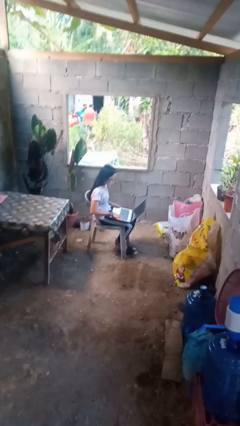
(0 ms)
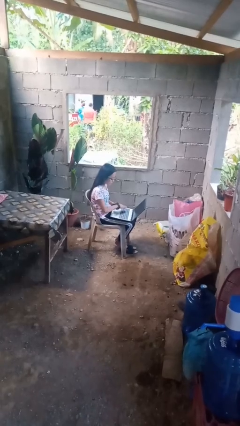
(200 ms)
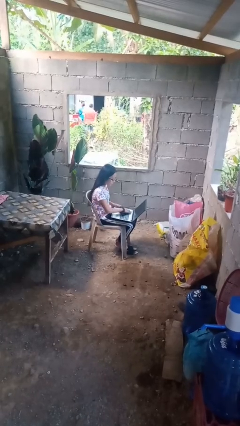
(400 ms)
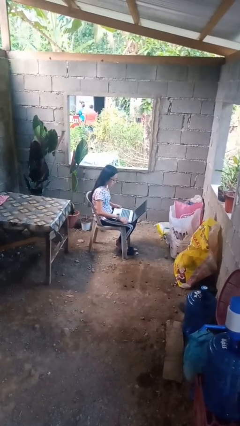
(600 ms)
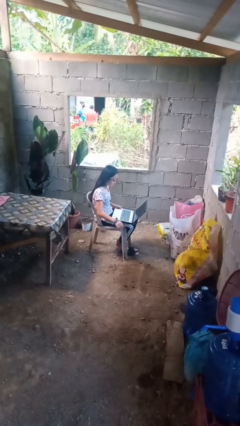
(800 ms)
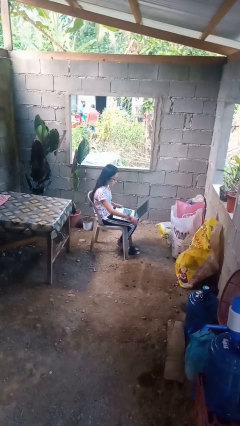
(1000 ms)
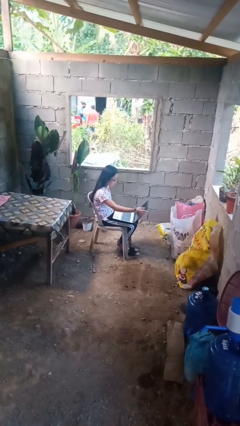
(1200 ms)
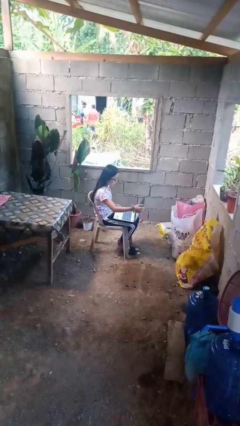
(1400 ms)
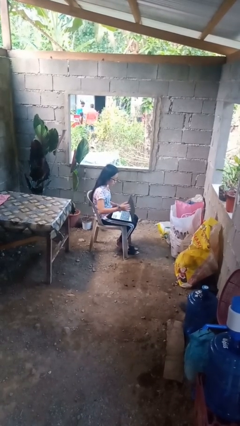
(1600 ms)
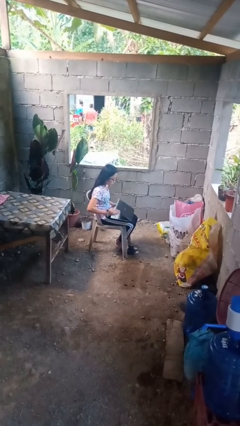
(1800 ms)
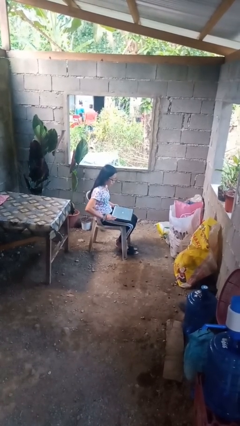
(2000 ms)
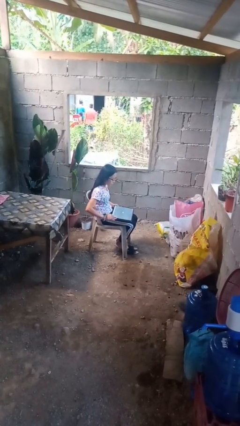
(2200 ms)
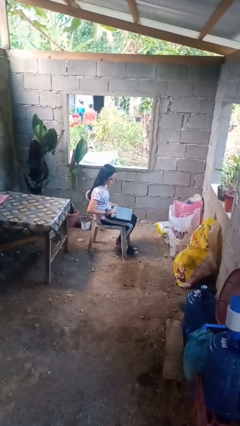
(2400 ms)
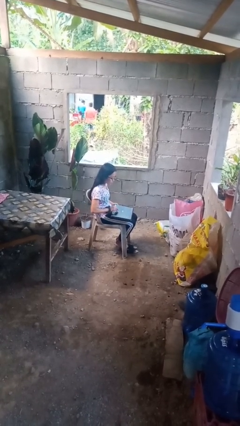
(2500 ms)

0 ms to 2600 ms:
person closes laptop

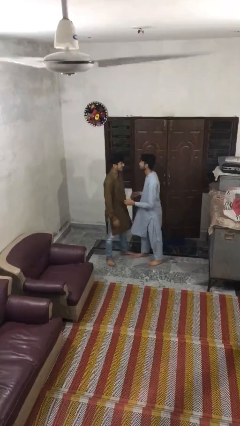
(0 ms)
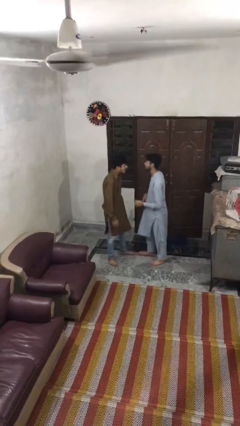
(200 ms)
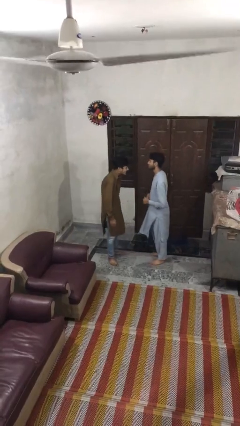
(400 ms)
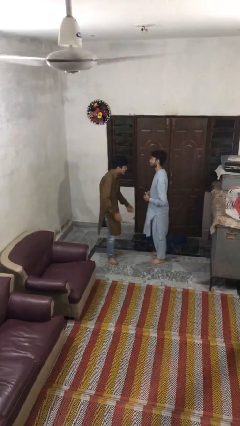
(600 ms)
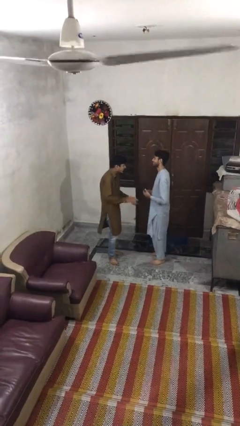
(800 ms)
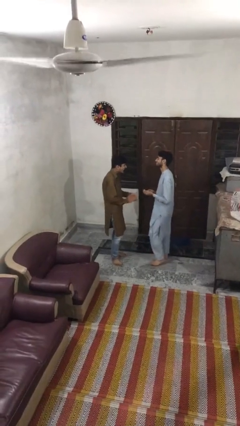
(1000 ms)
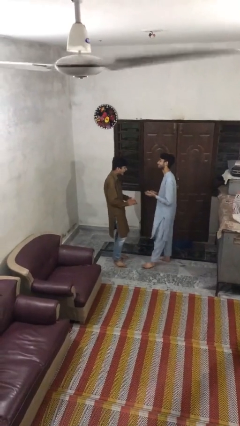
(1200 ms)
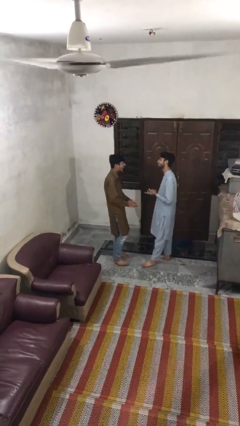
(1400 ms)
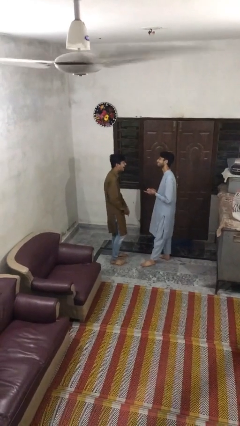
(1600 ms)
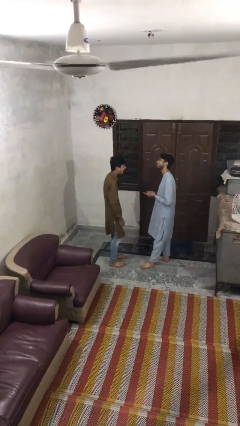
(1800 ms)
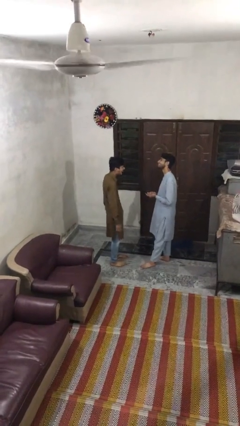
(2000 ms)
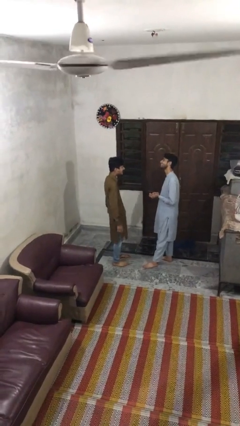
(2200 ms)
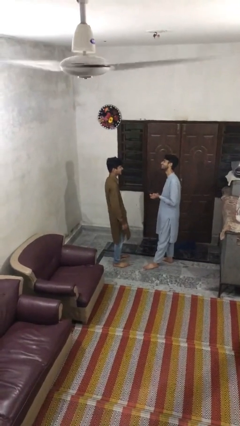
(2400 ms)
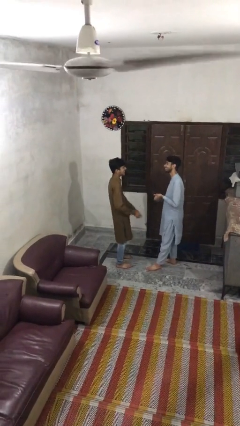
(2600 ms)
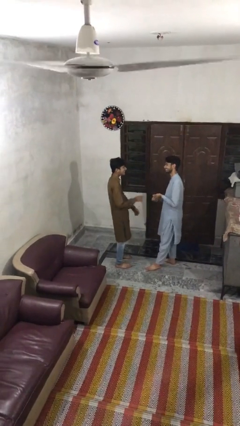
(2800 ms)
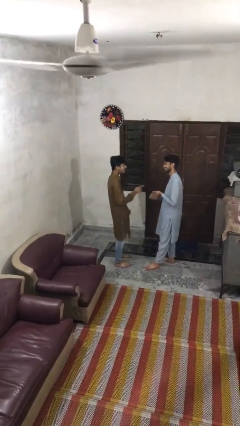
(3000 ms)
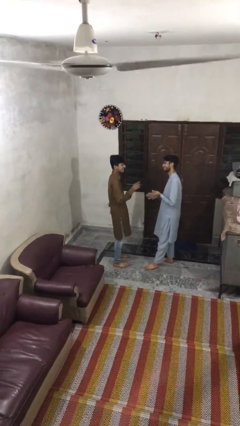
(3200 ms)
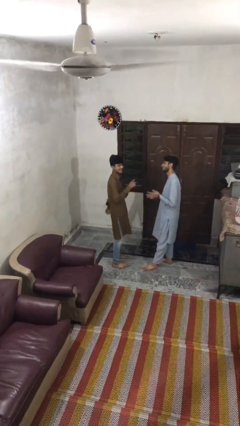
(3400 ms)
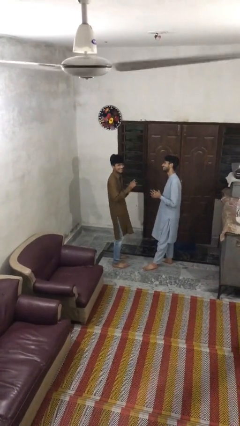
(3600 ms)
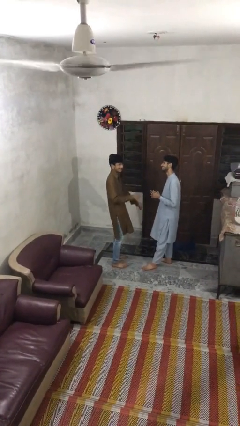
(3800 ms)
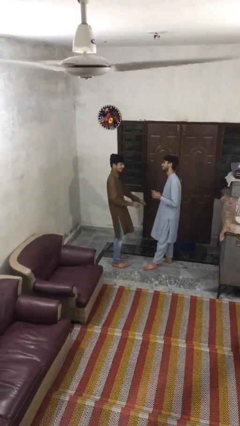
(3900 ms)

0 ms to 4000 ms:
person talks to person

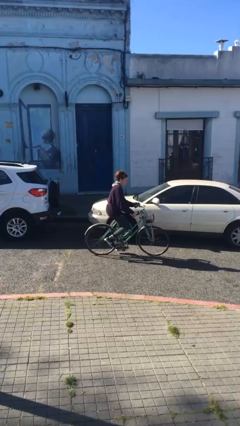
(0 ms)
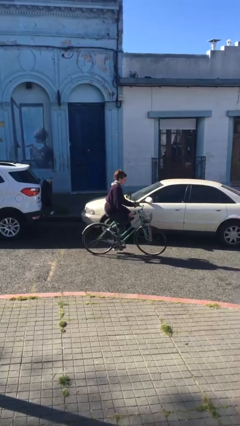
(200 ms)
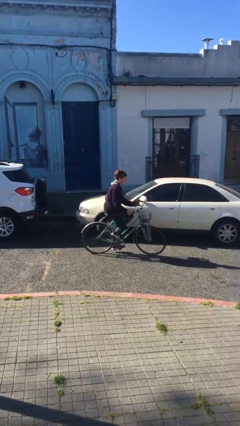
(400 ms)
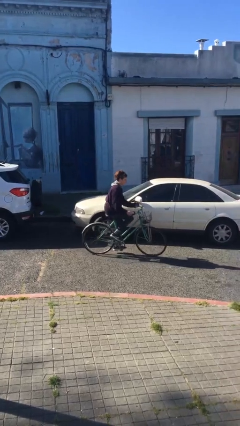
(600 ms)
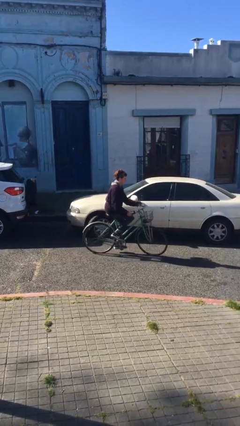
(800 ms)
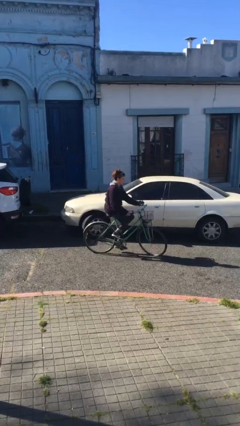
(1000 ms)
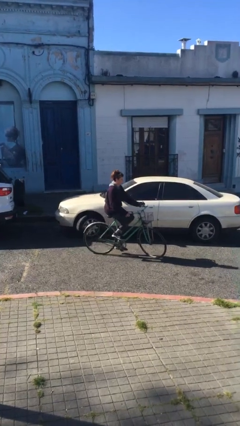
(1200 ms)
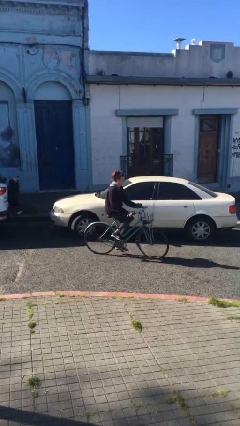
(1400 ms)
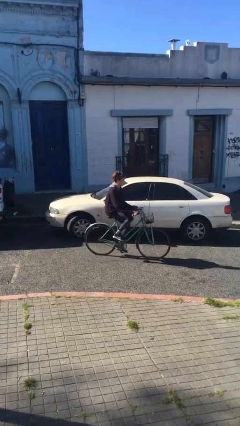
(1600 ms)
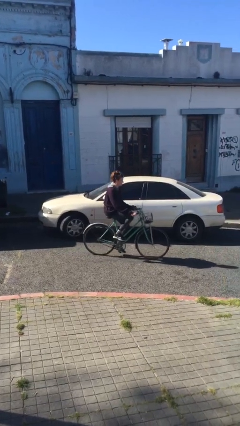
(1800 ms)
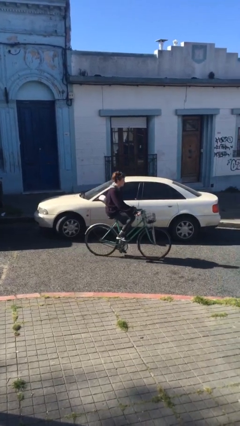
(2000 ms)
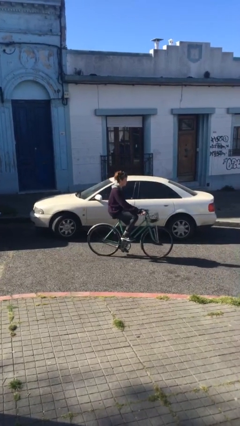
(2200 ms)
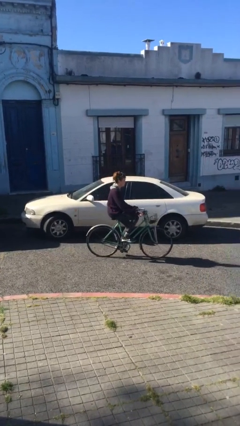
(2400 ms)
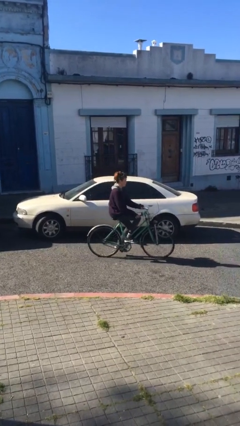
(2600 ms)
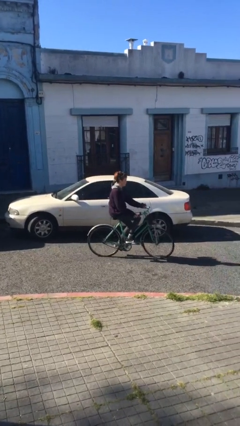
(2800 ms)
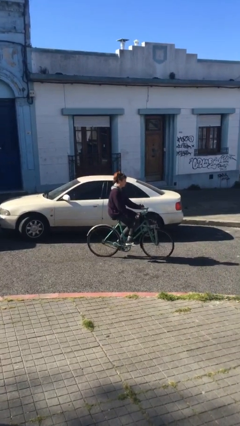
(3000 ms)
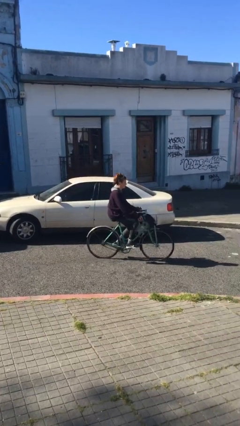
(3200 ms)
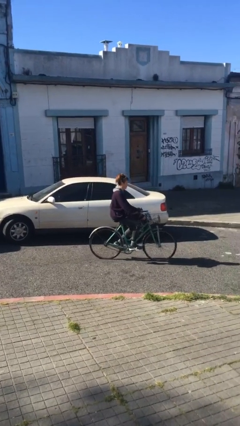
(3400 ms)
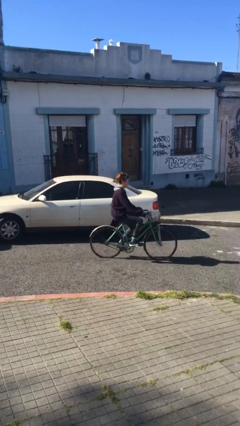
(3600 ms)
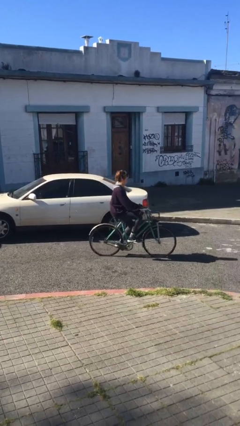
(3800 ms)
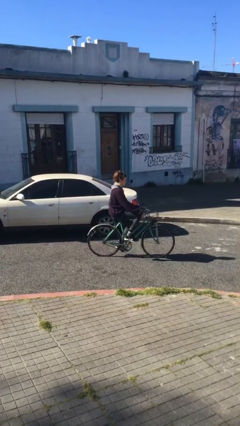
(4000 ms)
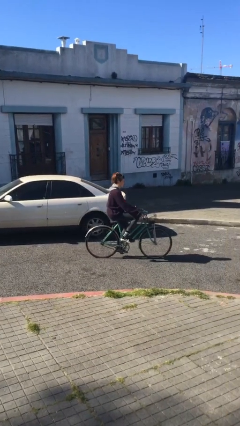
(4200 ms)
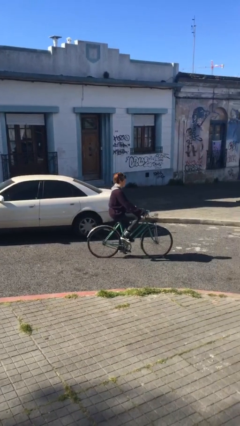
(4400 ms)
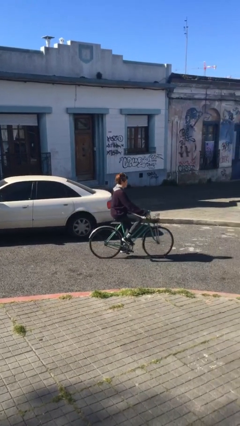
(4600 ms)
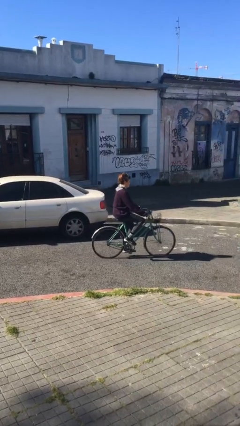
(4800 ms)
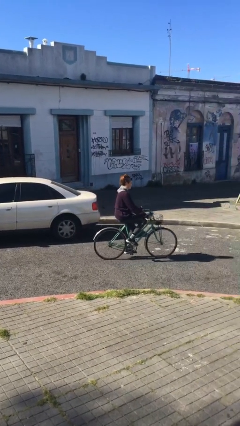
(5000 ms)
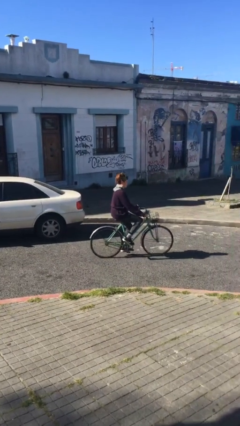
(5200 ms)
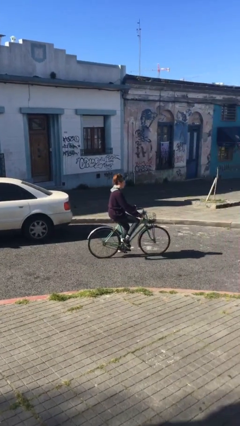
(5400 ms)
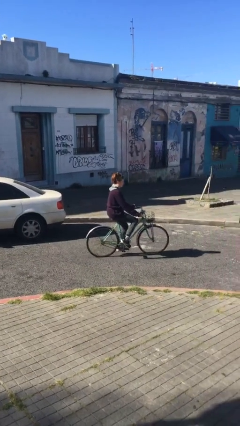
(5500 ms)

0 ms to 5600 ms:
person rides bicycle

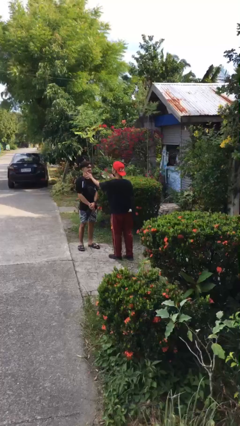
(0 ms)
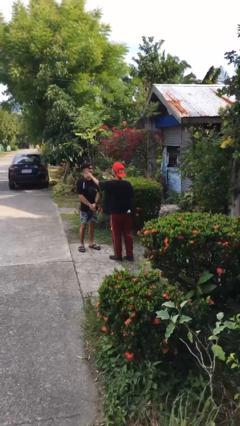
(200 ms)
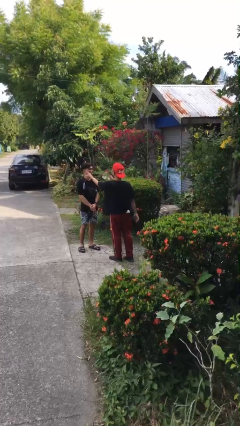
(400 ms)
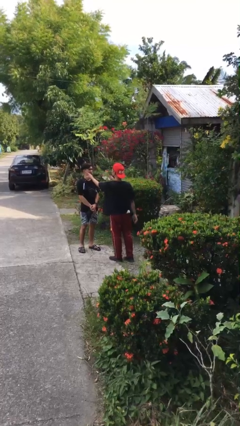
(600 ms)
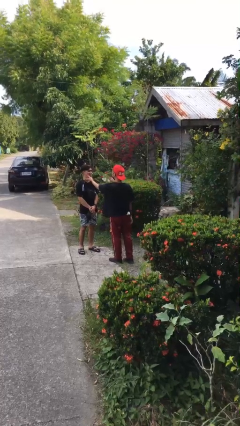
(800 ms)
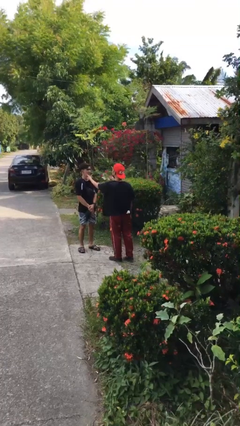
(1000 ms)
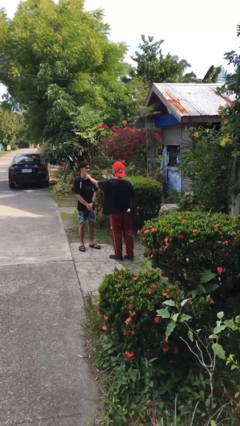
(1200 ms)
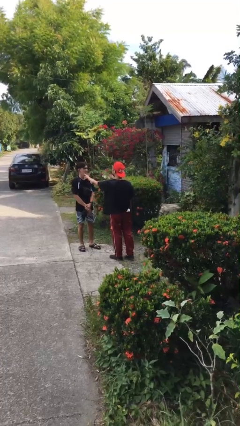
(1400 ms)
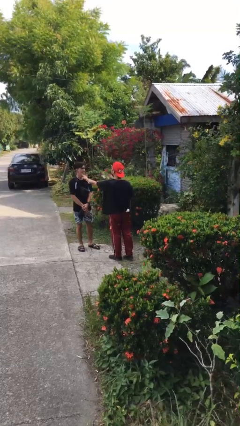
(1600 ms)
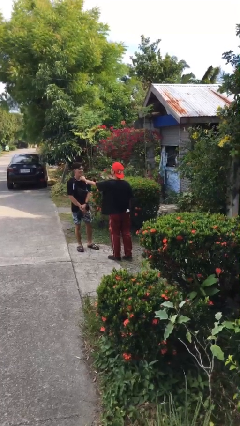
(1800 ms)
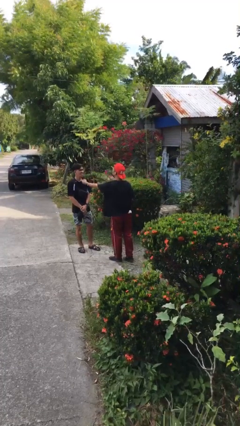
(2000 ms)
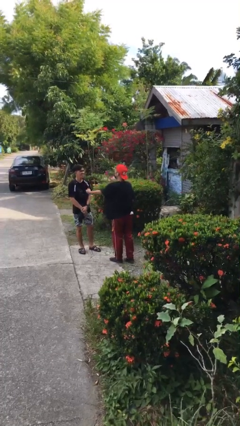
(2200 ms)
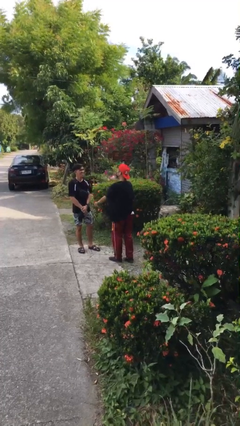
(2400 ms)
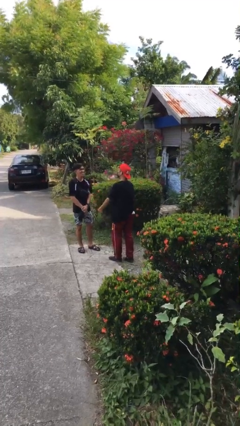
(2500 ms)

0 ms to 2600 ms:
person touches face of person

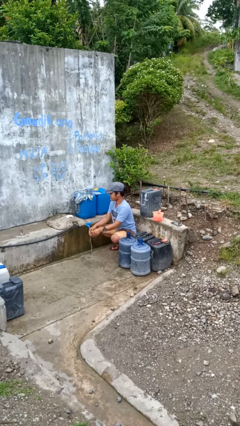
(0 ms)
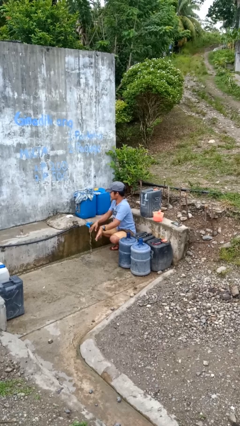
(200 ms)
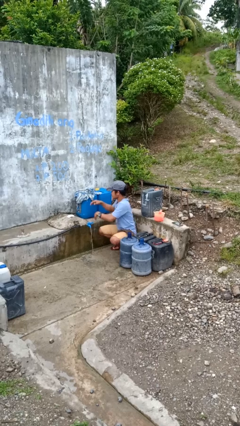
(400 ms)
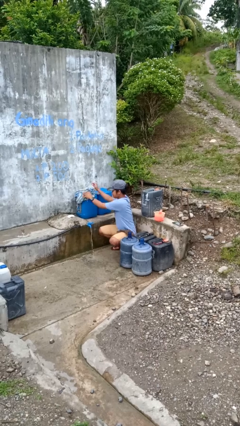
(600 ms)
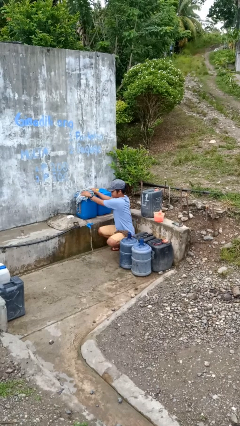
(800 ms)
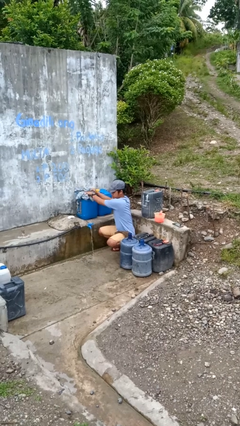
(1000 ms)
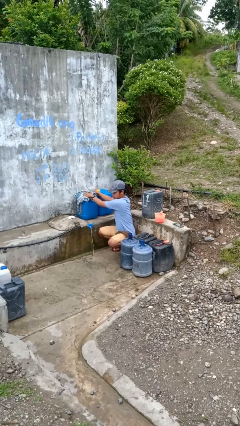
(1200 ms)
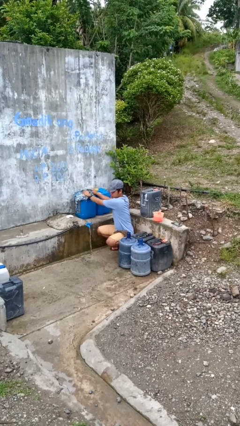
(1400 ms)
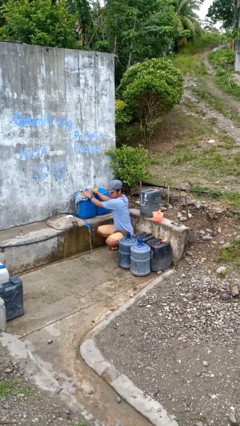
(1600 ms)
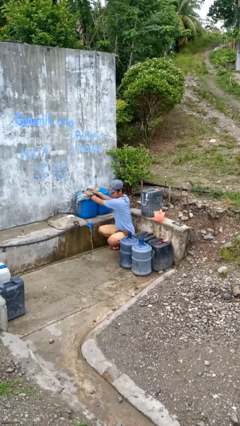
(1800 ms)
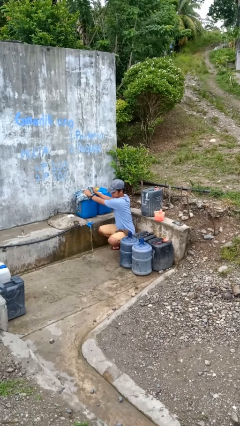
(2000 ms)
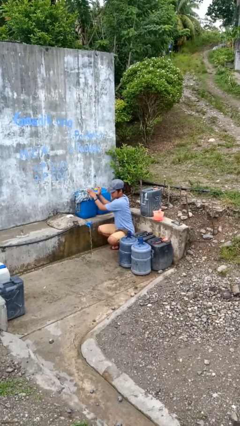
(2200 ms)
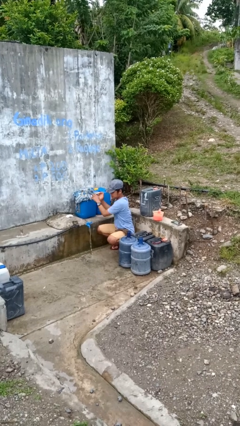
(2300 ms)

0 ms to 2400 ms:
person dries hands with towel

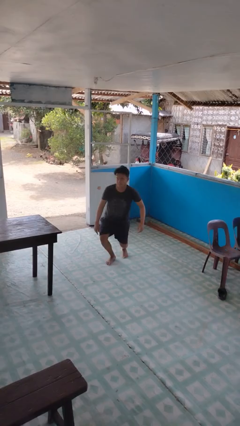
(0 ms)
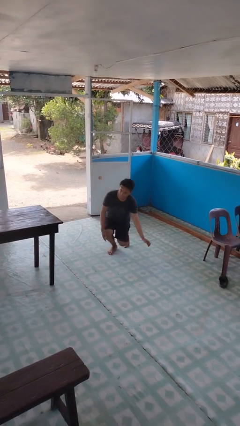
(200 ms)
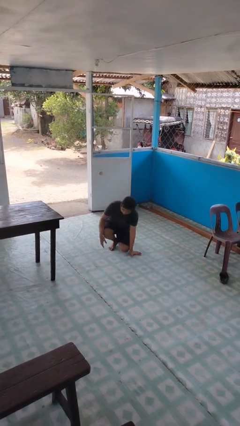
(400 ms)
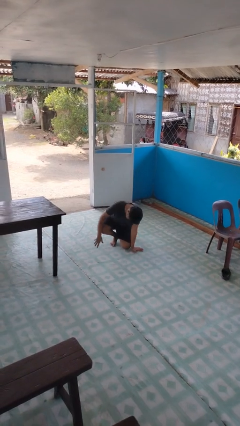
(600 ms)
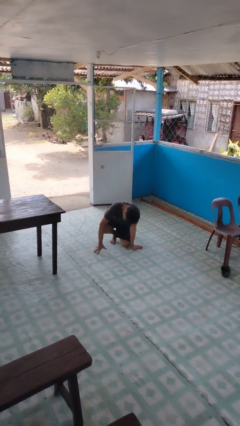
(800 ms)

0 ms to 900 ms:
person falls while standing
